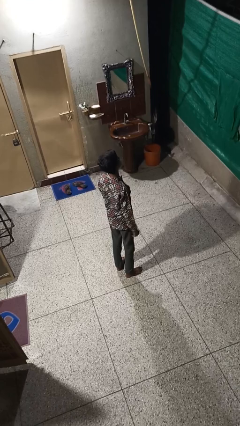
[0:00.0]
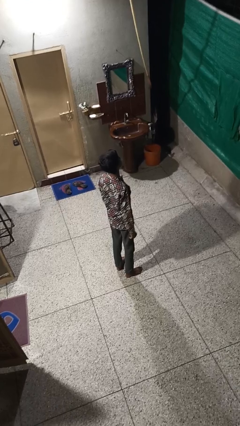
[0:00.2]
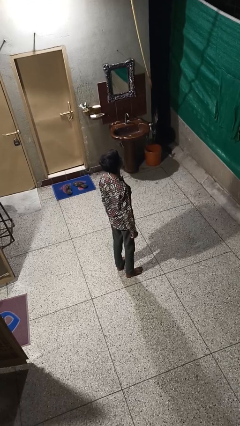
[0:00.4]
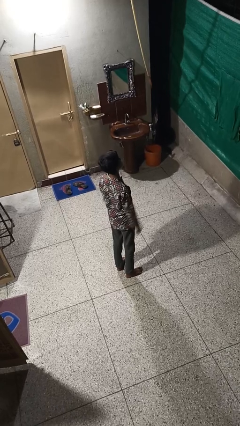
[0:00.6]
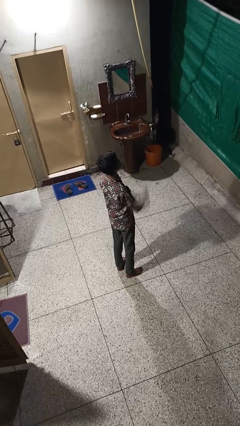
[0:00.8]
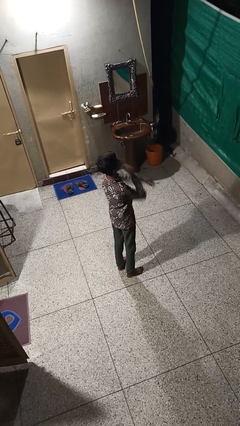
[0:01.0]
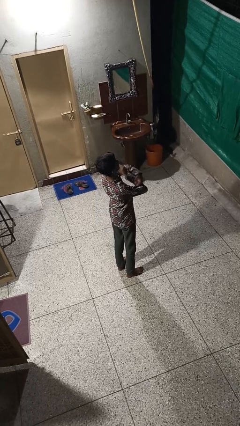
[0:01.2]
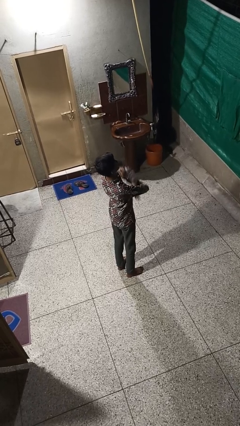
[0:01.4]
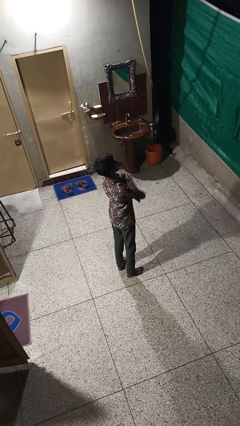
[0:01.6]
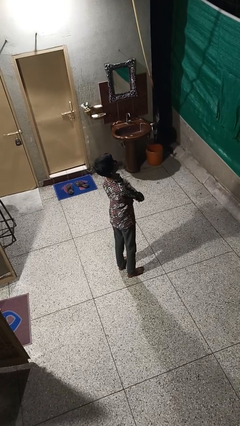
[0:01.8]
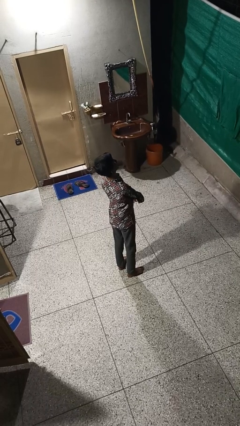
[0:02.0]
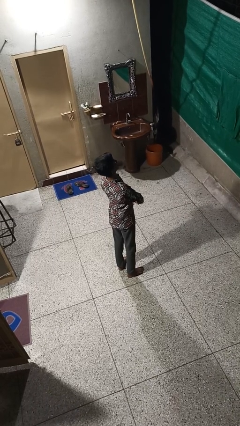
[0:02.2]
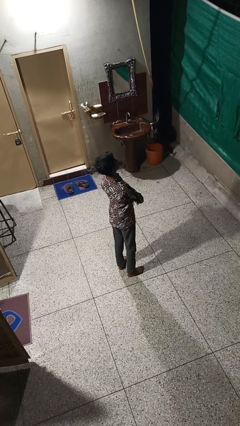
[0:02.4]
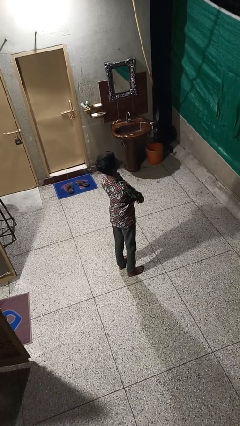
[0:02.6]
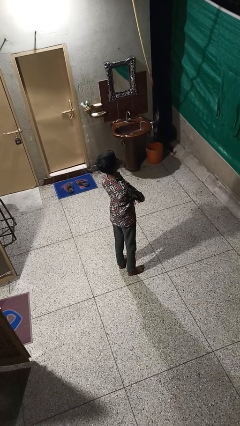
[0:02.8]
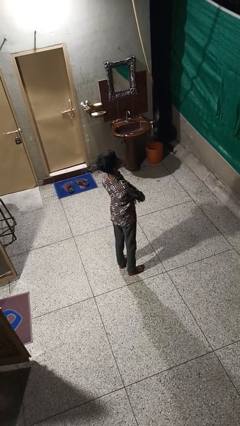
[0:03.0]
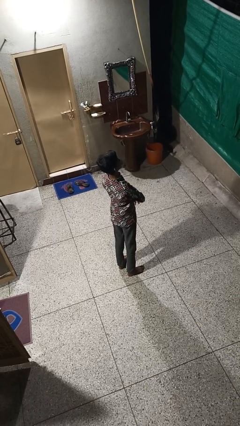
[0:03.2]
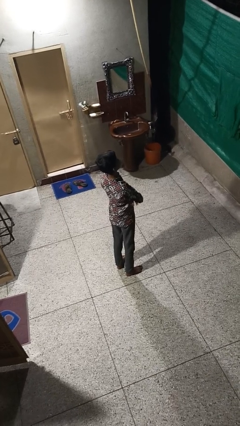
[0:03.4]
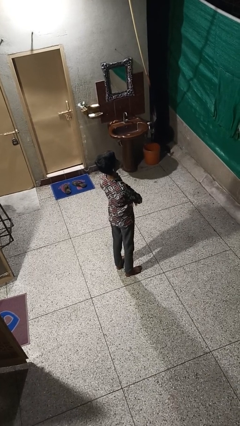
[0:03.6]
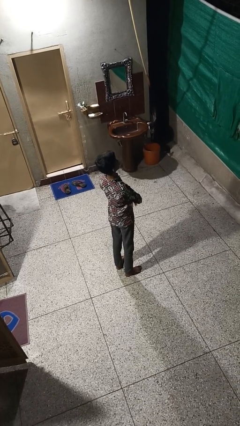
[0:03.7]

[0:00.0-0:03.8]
person crosses arms

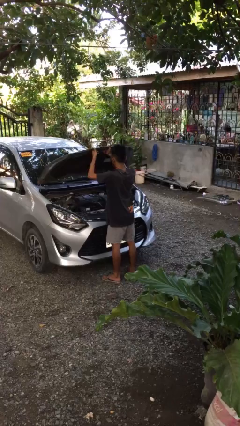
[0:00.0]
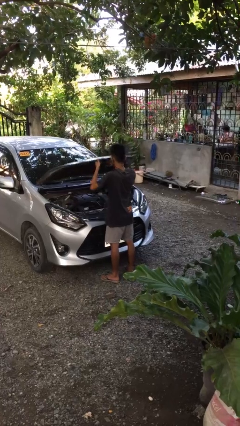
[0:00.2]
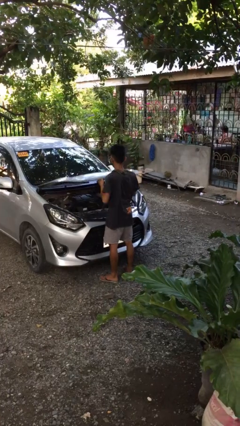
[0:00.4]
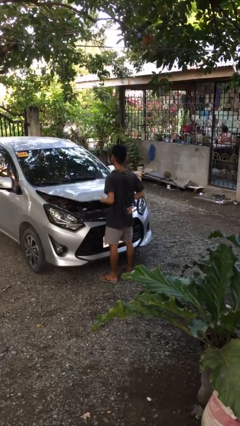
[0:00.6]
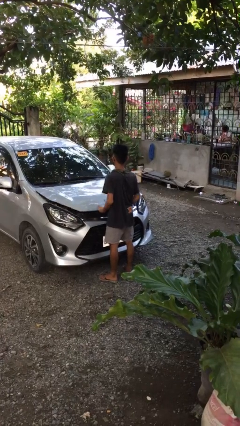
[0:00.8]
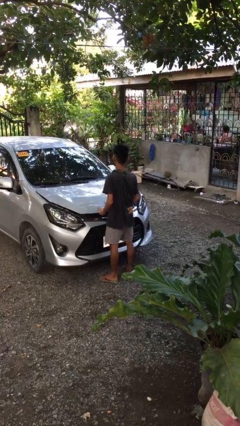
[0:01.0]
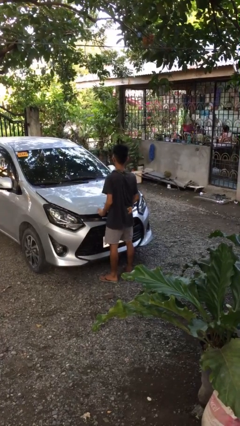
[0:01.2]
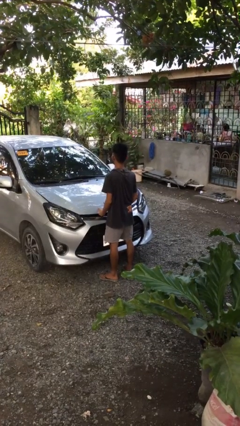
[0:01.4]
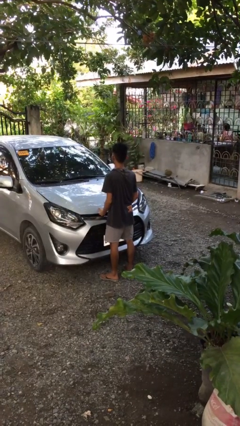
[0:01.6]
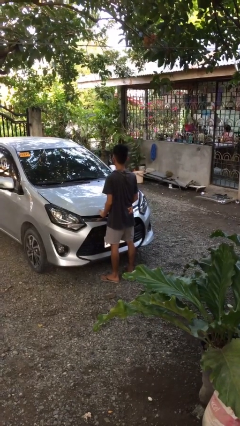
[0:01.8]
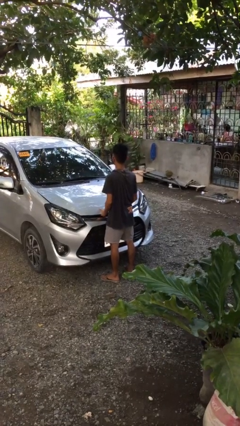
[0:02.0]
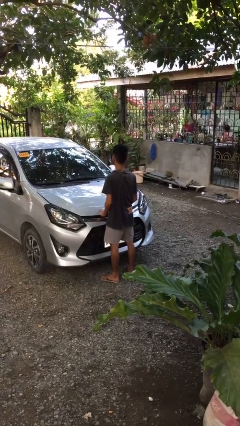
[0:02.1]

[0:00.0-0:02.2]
person closes car hood

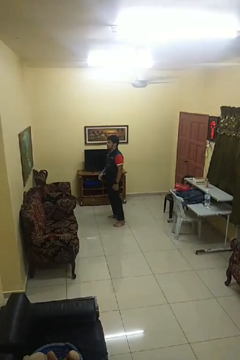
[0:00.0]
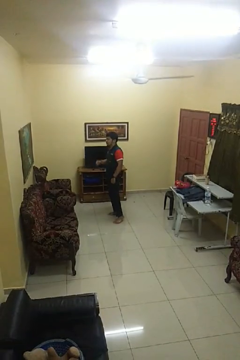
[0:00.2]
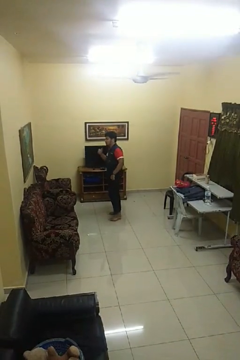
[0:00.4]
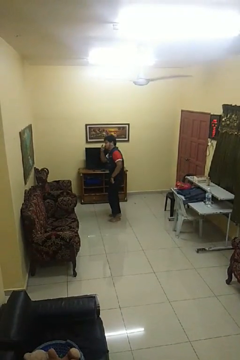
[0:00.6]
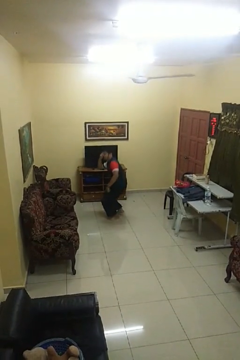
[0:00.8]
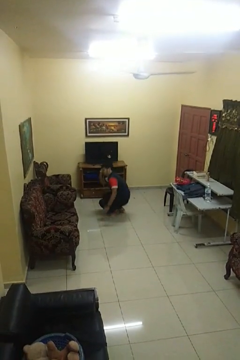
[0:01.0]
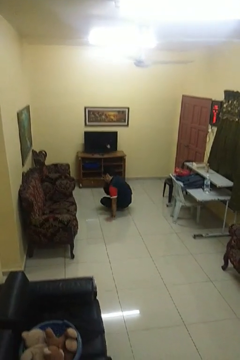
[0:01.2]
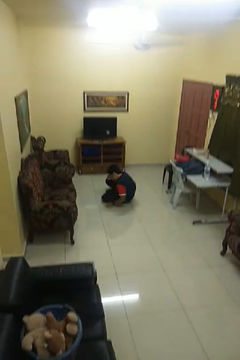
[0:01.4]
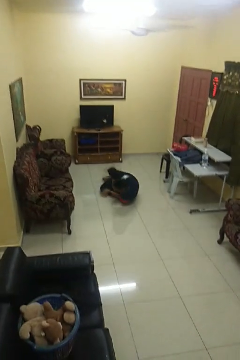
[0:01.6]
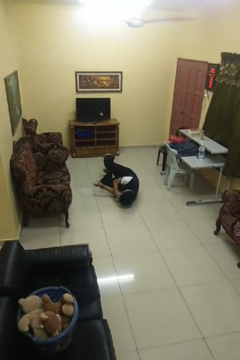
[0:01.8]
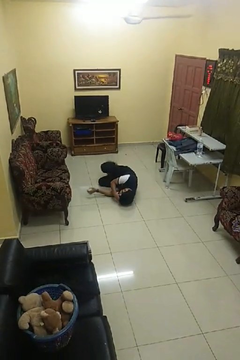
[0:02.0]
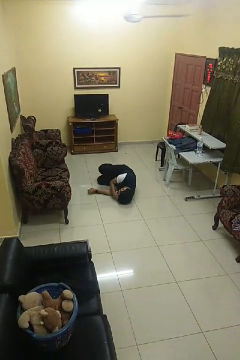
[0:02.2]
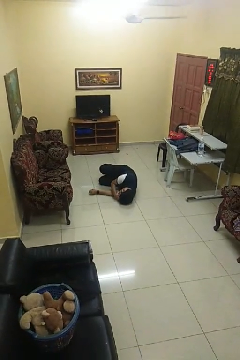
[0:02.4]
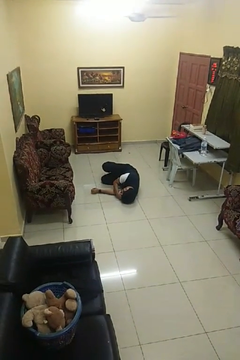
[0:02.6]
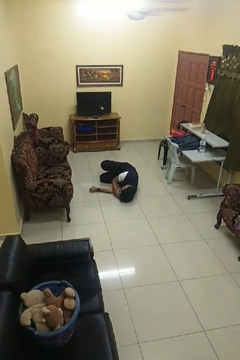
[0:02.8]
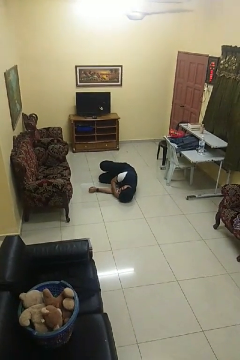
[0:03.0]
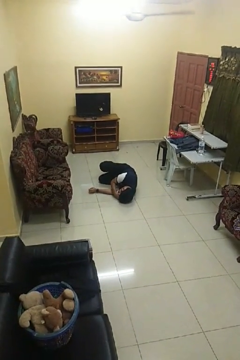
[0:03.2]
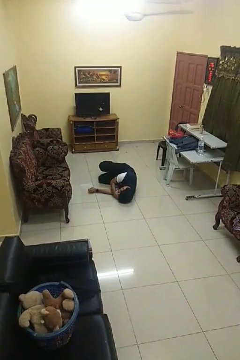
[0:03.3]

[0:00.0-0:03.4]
person falls while standing

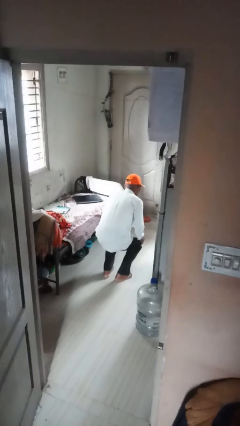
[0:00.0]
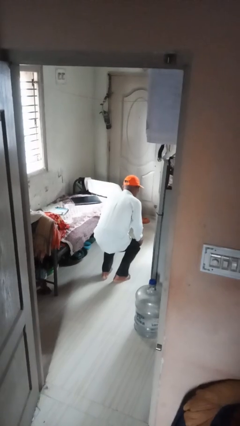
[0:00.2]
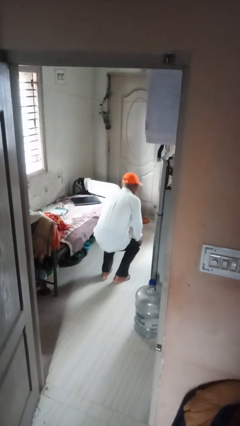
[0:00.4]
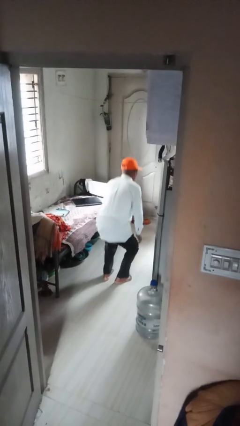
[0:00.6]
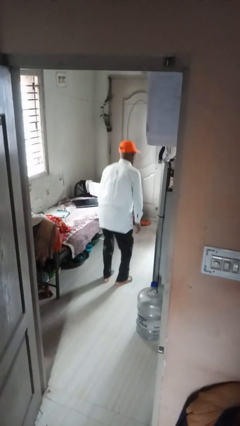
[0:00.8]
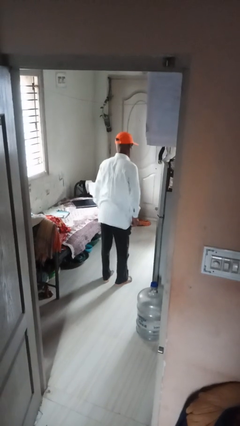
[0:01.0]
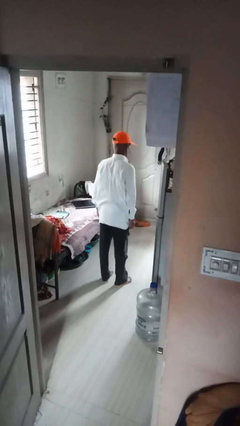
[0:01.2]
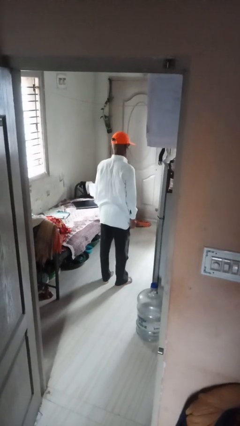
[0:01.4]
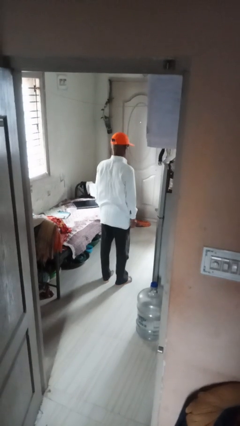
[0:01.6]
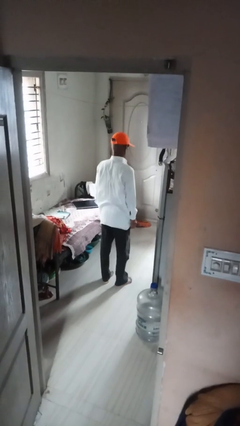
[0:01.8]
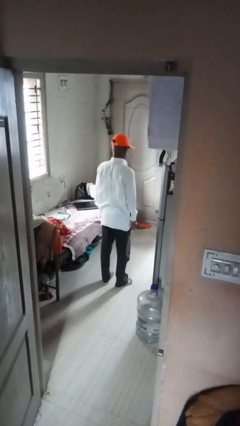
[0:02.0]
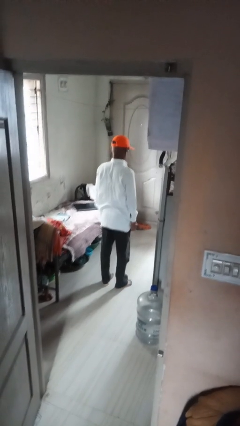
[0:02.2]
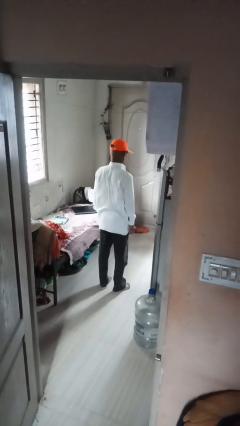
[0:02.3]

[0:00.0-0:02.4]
person stands up

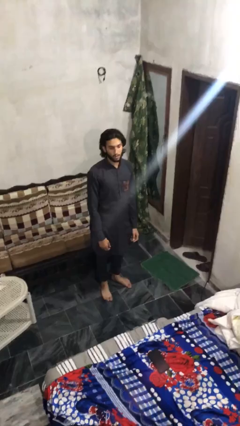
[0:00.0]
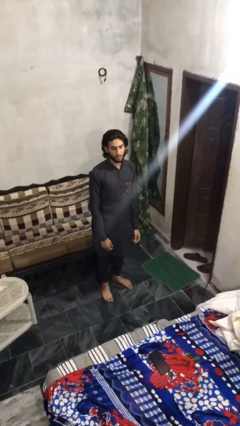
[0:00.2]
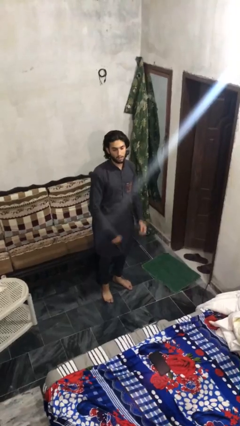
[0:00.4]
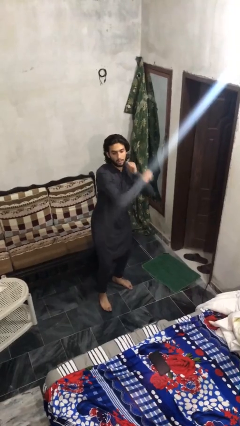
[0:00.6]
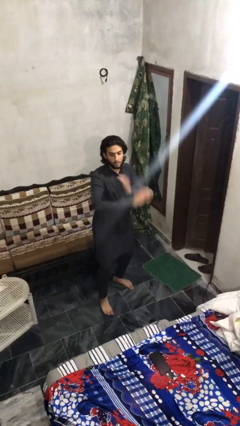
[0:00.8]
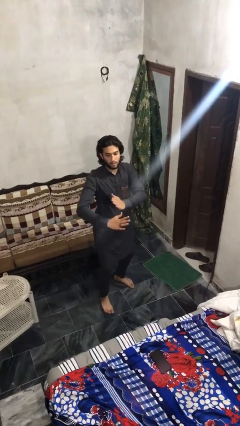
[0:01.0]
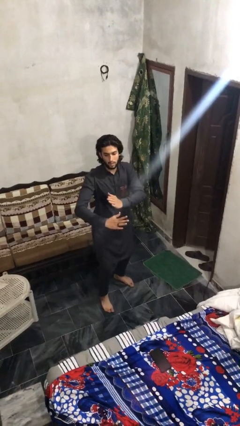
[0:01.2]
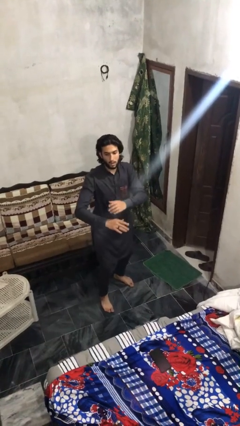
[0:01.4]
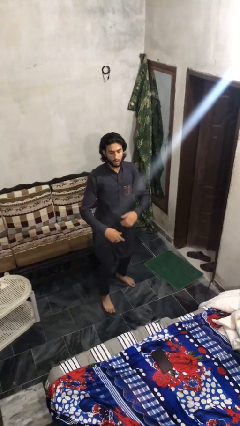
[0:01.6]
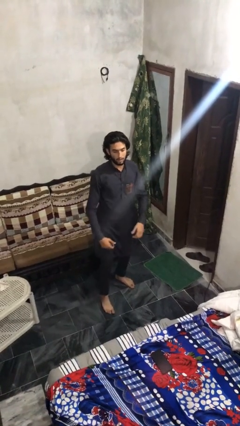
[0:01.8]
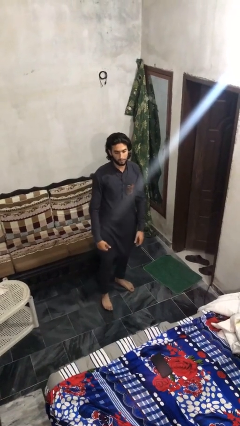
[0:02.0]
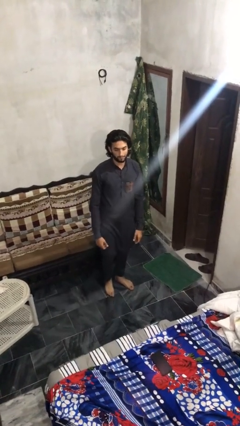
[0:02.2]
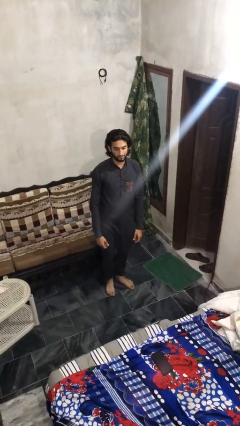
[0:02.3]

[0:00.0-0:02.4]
person karate chop

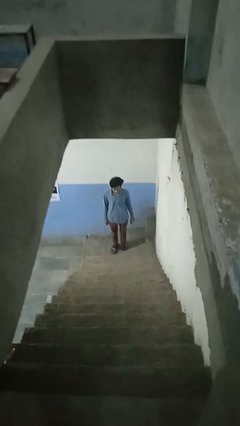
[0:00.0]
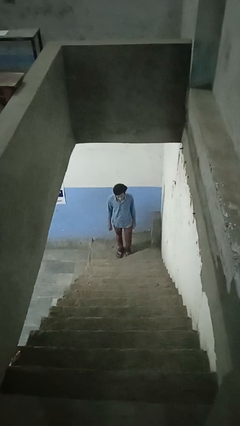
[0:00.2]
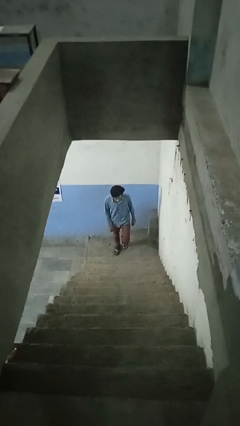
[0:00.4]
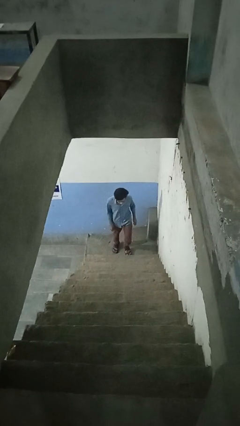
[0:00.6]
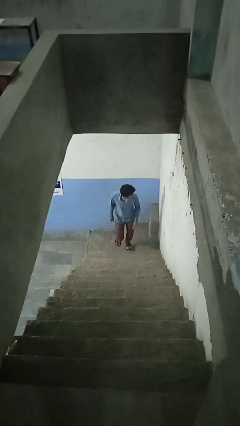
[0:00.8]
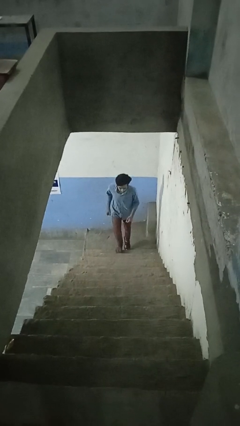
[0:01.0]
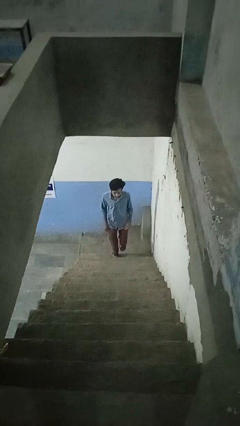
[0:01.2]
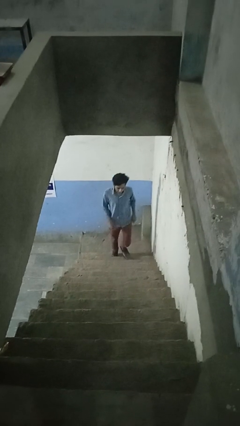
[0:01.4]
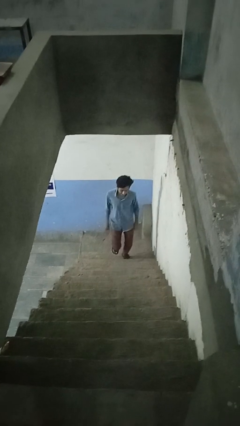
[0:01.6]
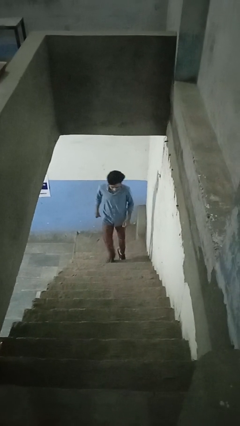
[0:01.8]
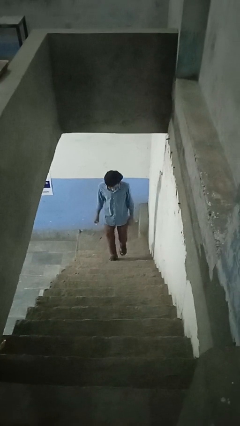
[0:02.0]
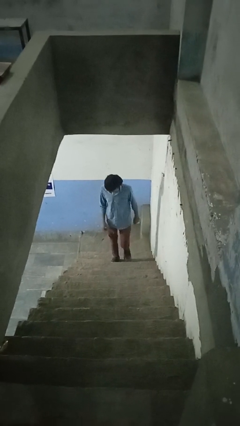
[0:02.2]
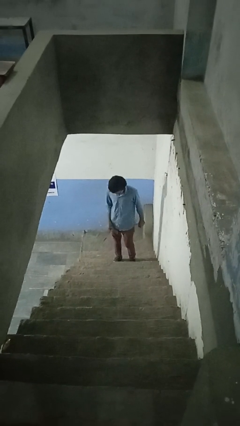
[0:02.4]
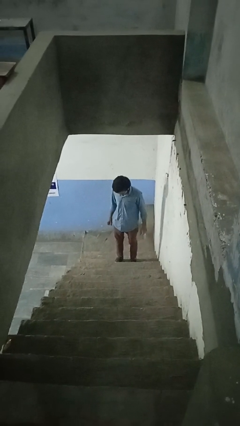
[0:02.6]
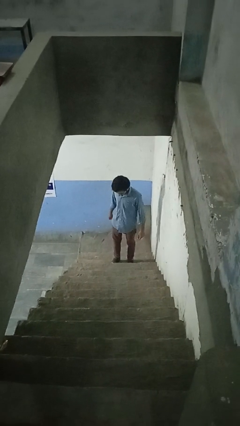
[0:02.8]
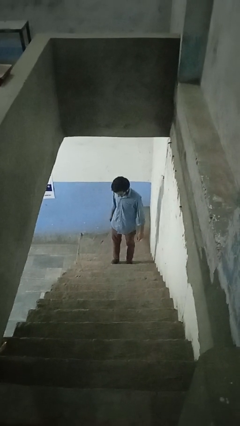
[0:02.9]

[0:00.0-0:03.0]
person climbs up stairs

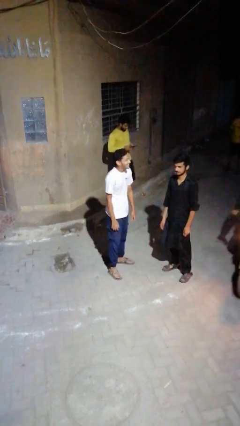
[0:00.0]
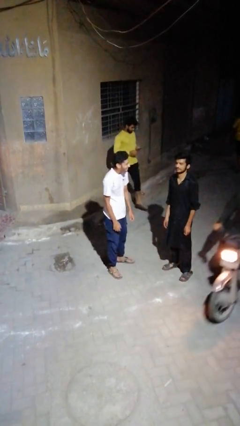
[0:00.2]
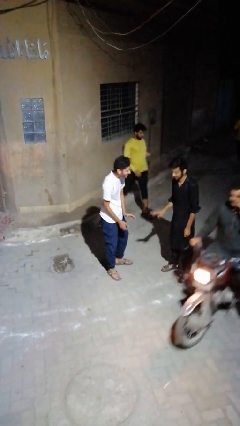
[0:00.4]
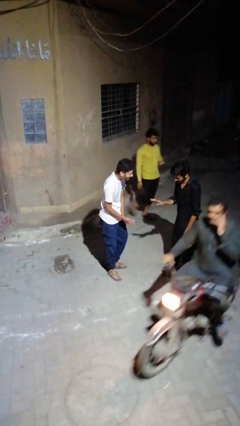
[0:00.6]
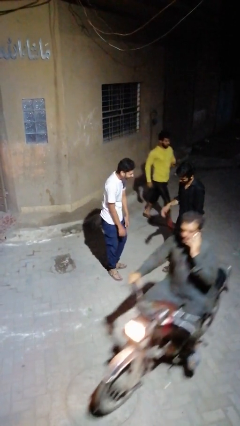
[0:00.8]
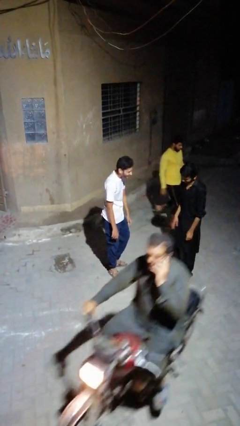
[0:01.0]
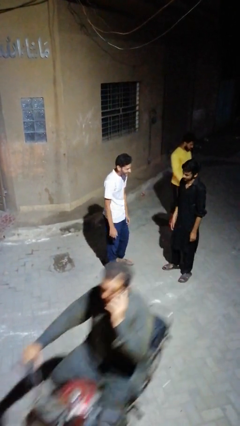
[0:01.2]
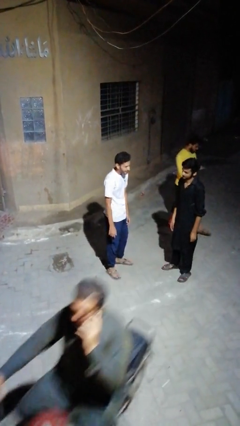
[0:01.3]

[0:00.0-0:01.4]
person laughs with person
